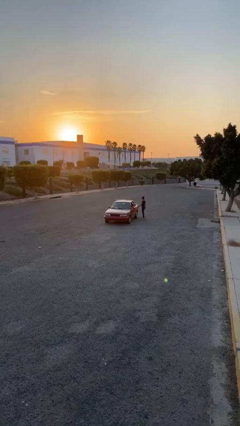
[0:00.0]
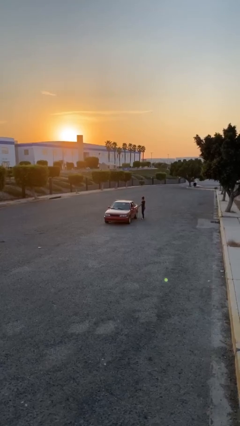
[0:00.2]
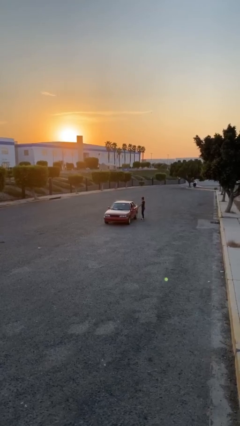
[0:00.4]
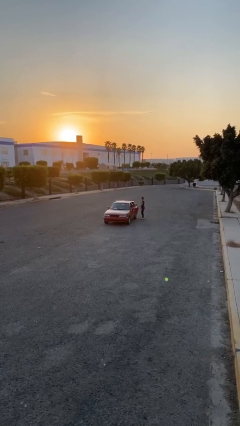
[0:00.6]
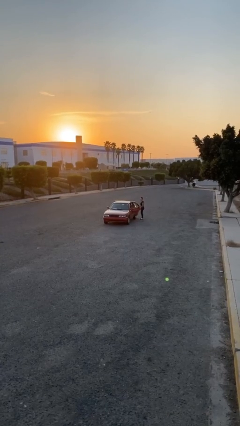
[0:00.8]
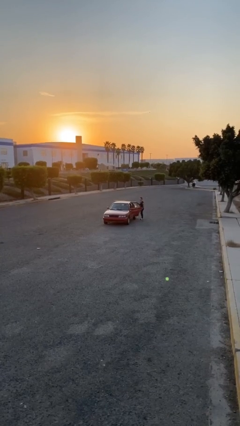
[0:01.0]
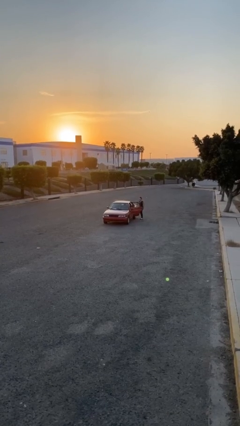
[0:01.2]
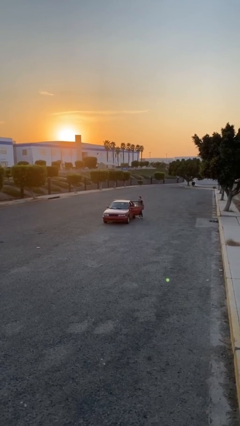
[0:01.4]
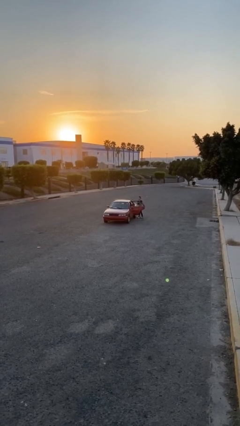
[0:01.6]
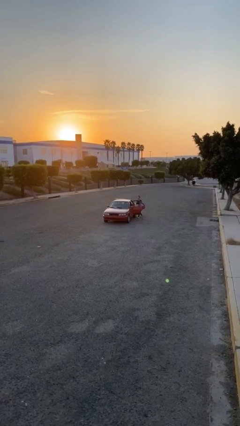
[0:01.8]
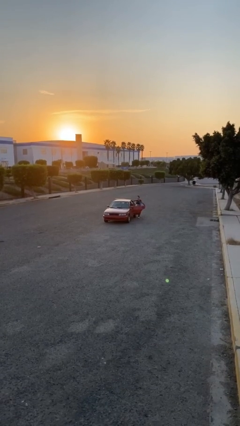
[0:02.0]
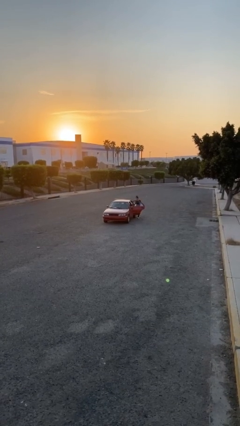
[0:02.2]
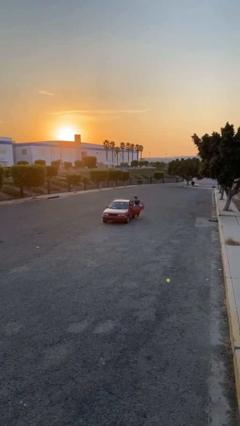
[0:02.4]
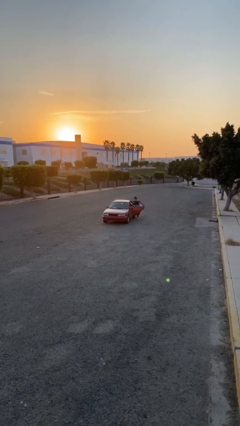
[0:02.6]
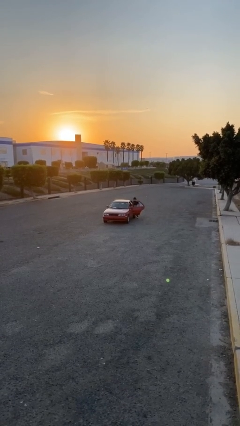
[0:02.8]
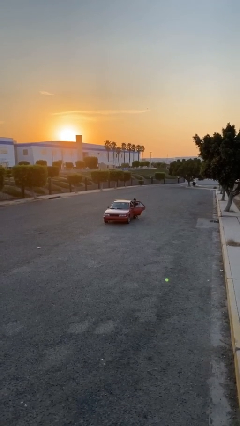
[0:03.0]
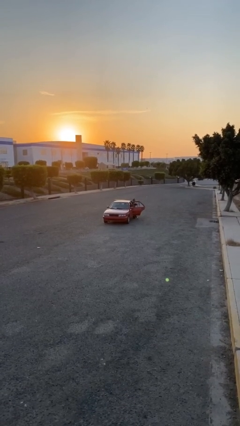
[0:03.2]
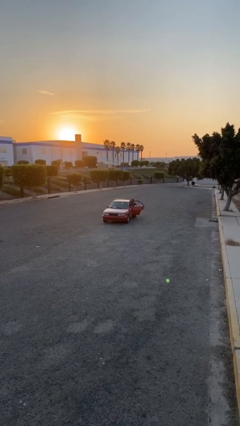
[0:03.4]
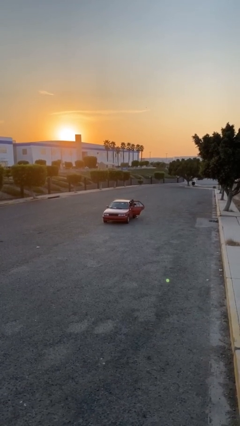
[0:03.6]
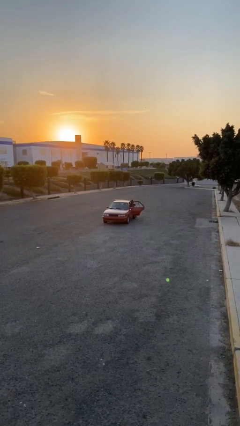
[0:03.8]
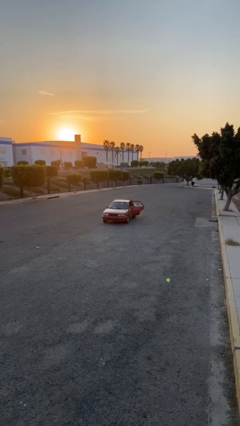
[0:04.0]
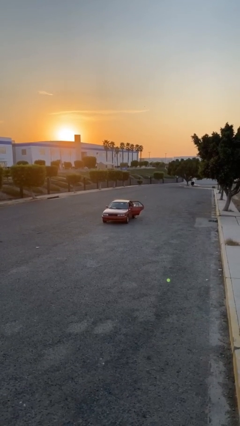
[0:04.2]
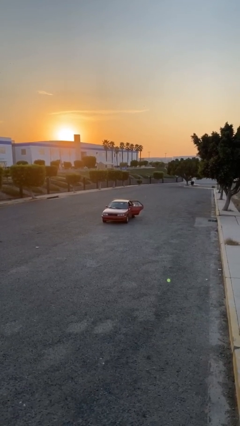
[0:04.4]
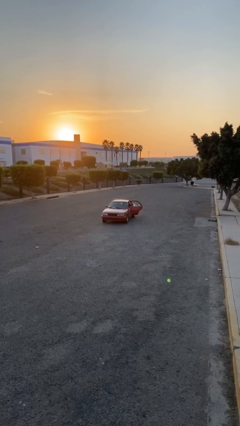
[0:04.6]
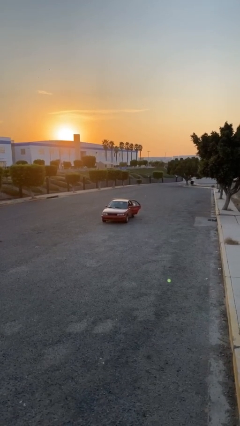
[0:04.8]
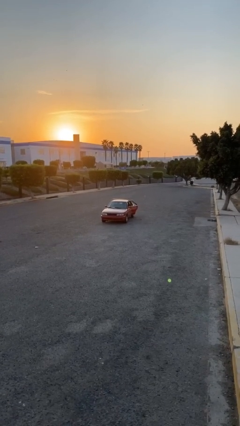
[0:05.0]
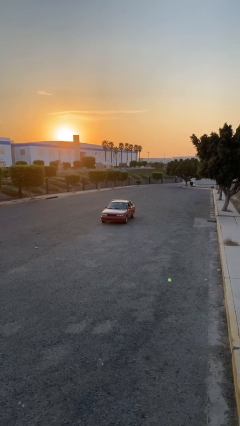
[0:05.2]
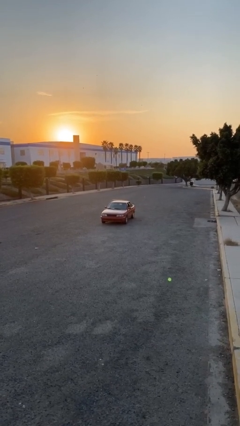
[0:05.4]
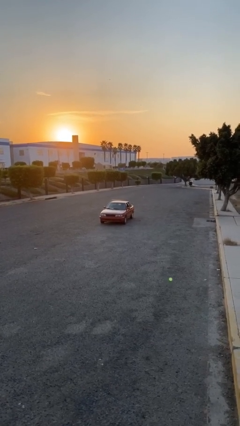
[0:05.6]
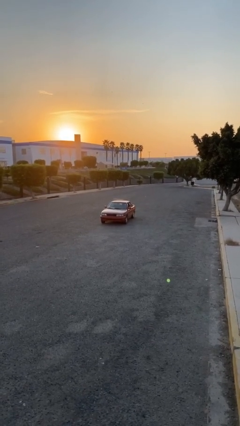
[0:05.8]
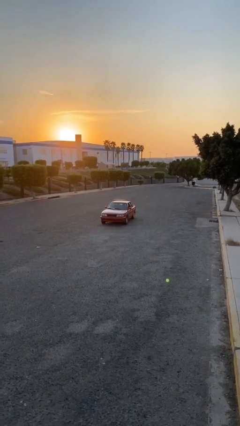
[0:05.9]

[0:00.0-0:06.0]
car picks up person

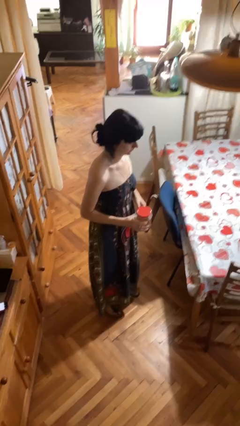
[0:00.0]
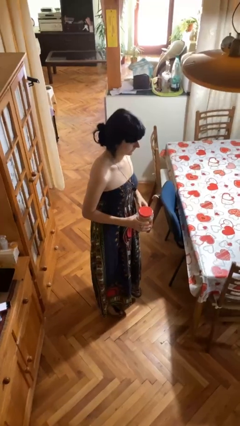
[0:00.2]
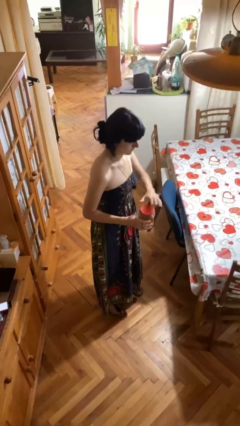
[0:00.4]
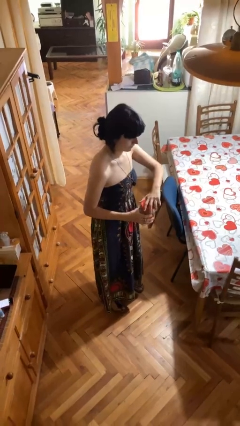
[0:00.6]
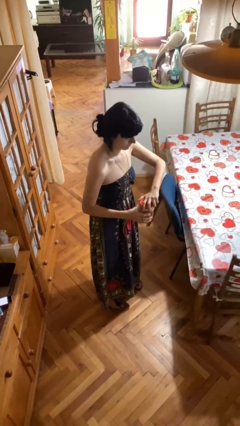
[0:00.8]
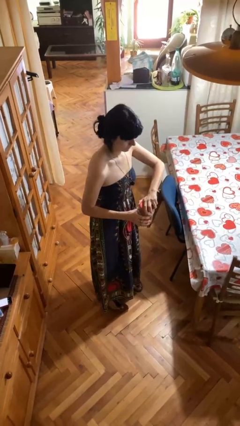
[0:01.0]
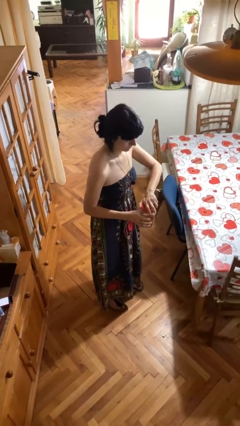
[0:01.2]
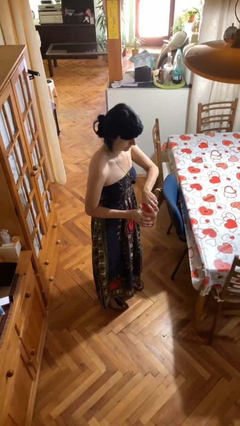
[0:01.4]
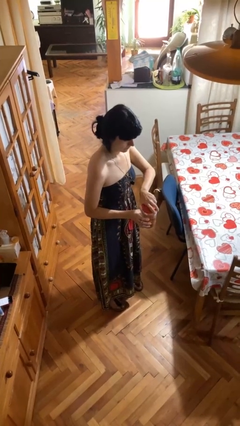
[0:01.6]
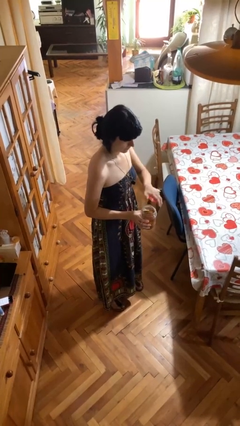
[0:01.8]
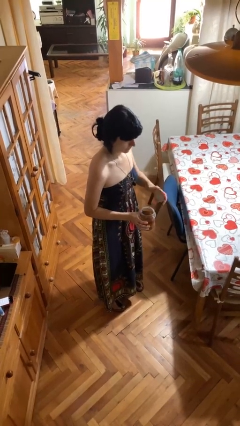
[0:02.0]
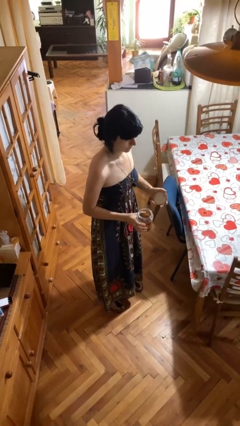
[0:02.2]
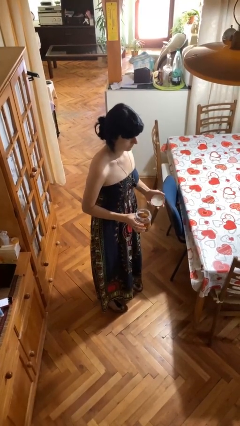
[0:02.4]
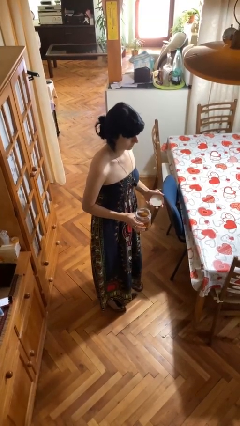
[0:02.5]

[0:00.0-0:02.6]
person opens jar

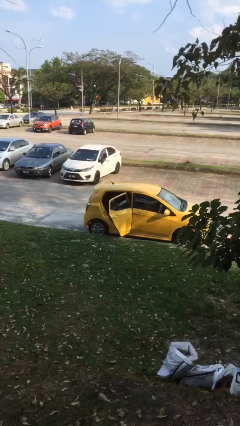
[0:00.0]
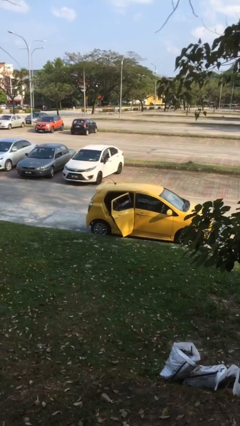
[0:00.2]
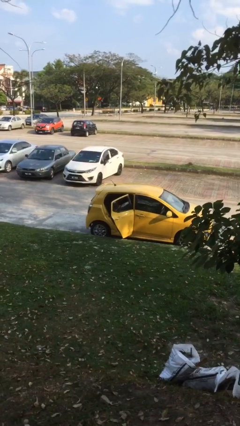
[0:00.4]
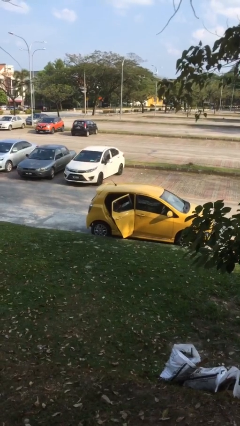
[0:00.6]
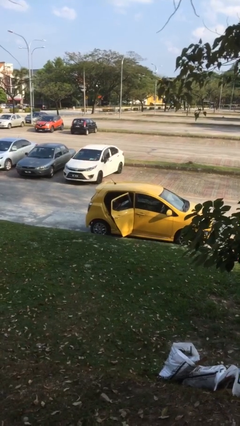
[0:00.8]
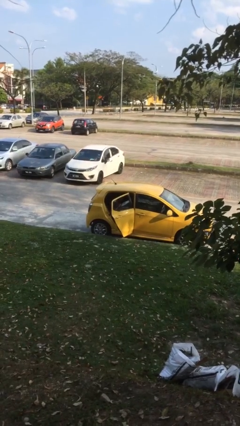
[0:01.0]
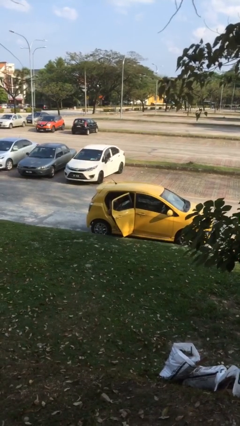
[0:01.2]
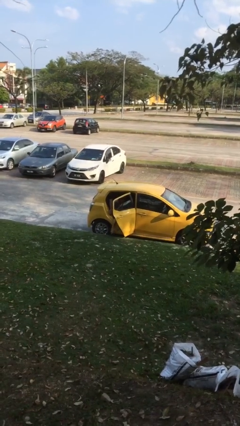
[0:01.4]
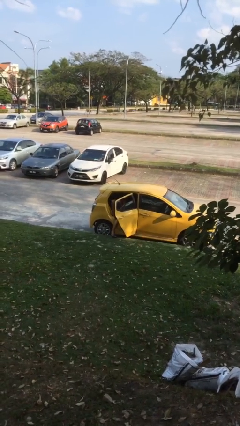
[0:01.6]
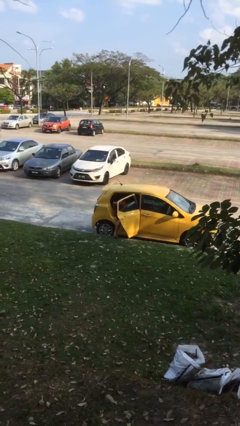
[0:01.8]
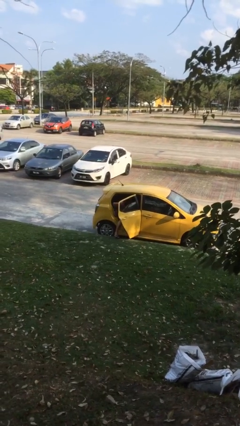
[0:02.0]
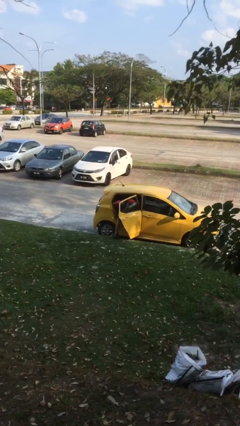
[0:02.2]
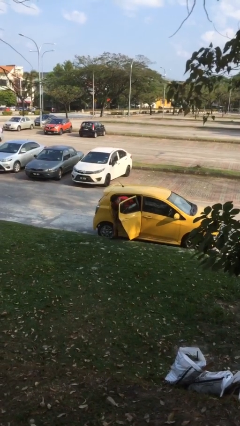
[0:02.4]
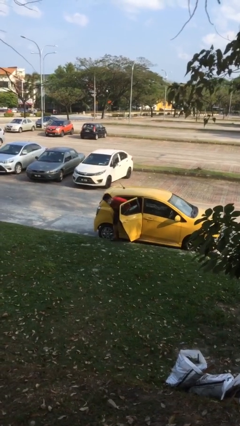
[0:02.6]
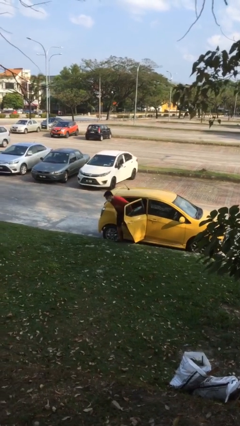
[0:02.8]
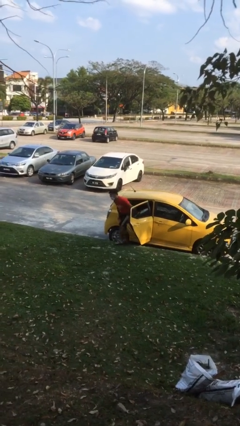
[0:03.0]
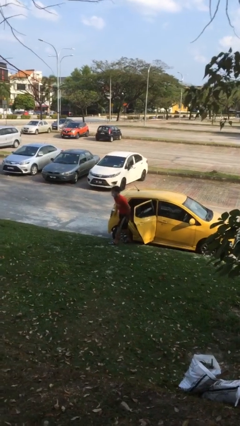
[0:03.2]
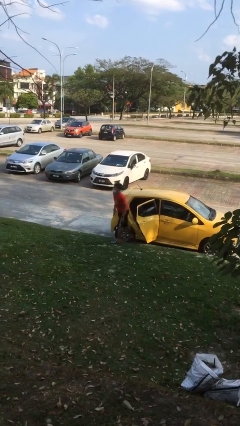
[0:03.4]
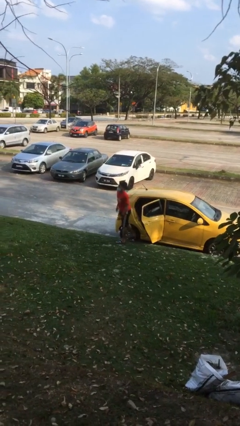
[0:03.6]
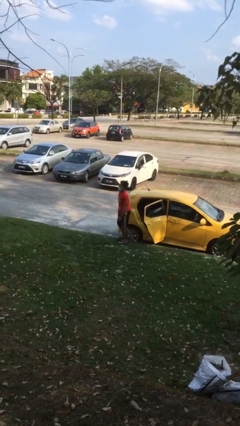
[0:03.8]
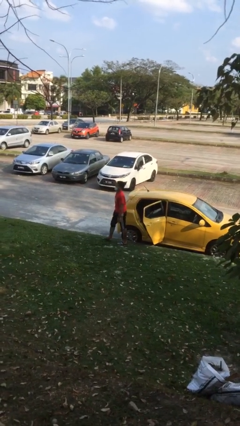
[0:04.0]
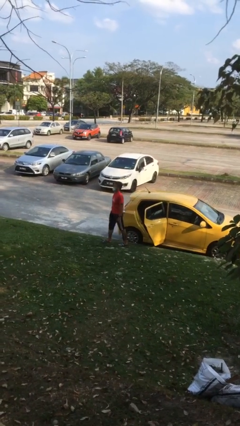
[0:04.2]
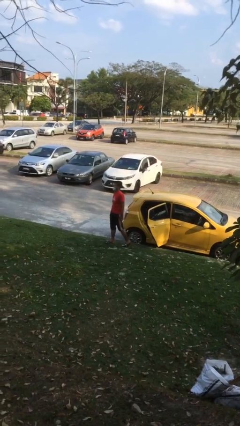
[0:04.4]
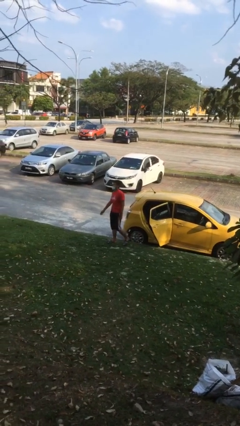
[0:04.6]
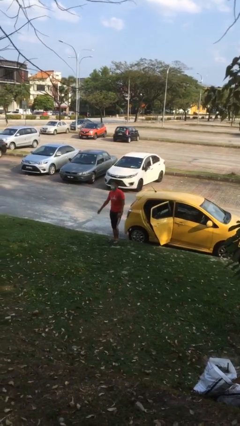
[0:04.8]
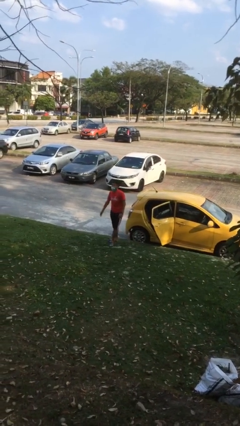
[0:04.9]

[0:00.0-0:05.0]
person exits car

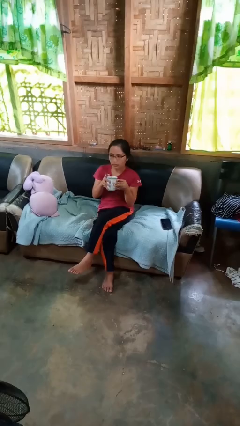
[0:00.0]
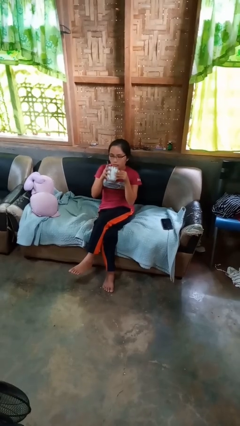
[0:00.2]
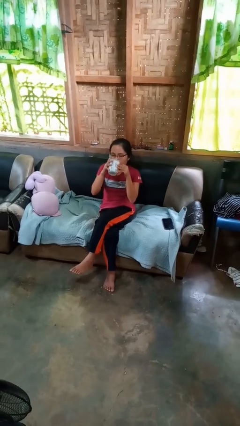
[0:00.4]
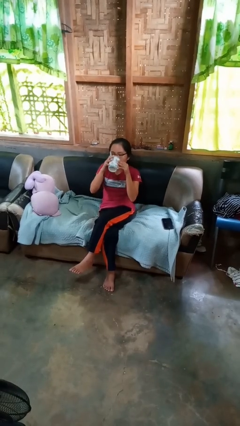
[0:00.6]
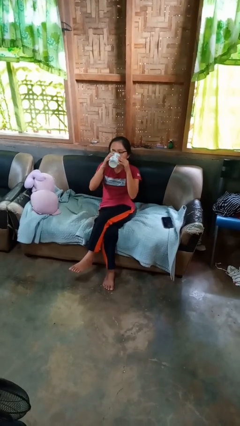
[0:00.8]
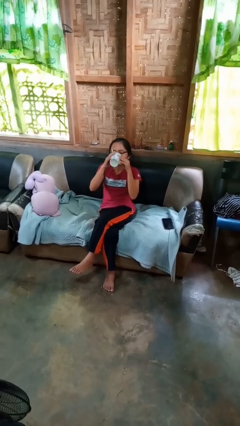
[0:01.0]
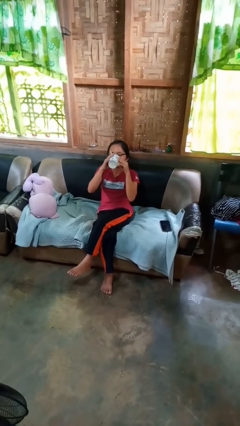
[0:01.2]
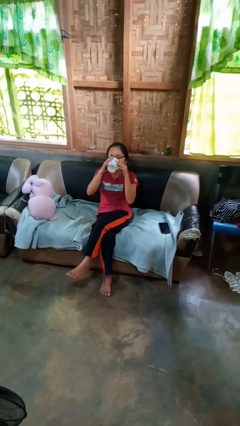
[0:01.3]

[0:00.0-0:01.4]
person drinks from mug

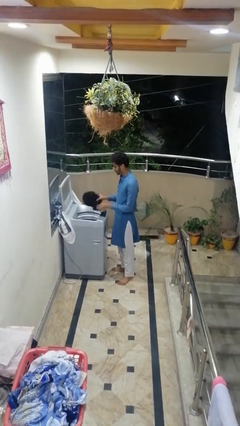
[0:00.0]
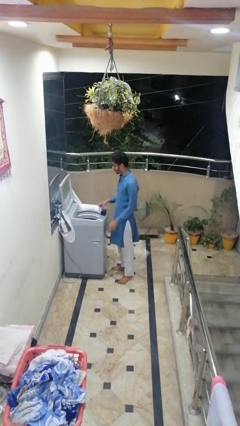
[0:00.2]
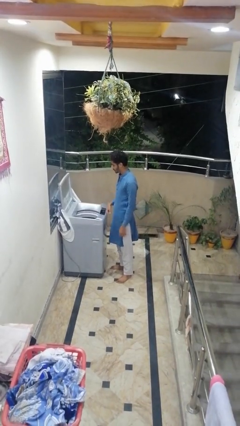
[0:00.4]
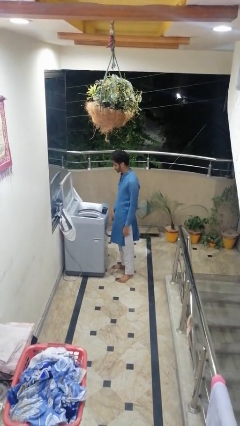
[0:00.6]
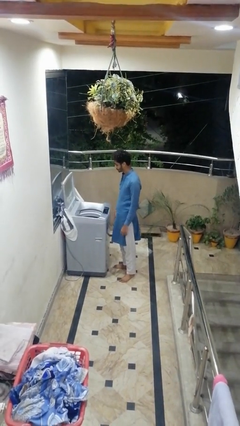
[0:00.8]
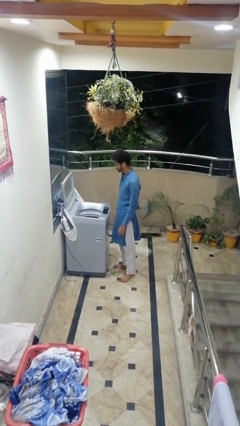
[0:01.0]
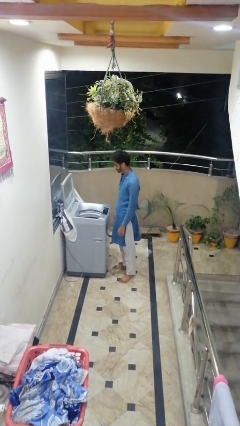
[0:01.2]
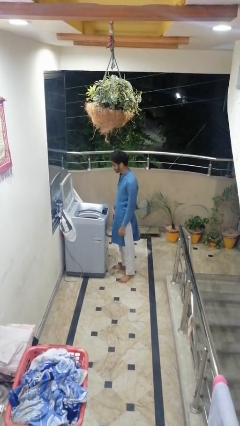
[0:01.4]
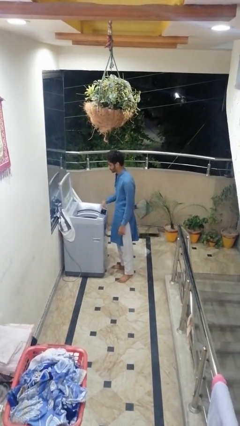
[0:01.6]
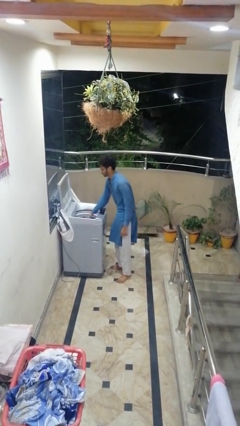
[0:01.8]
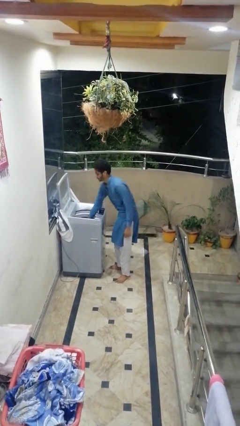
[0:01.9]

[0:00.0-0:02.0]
person loads clotheswasher

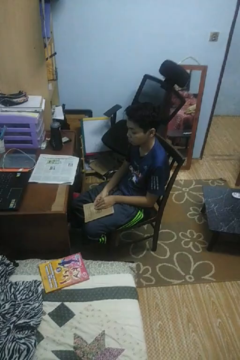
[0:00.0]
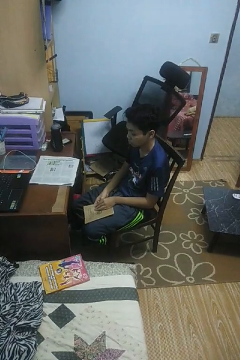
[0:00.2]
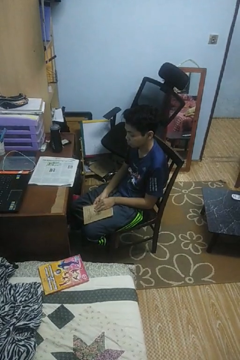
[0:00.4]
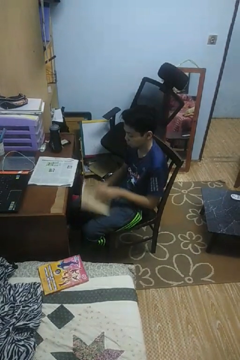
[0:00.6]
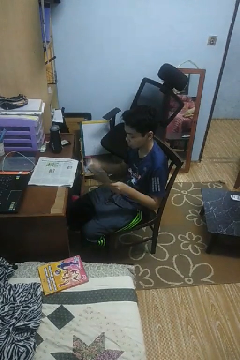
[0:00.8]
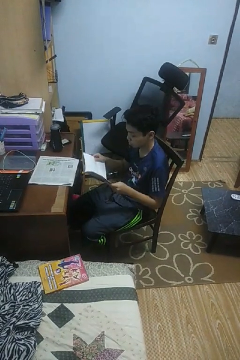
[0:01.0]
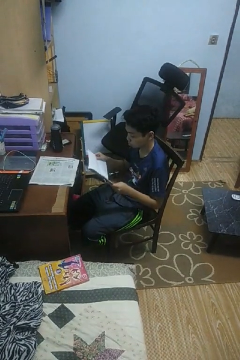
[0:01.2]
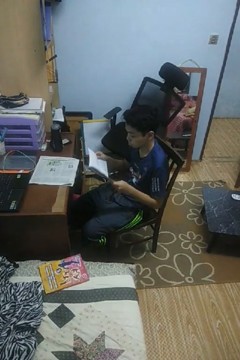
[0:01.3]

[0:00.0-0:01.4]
person reads book
